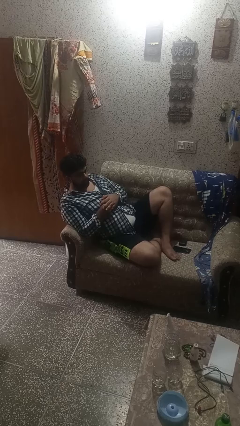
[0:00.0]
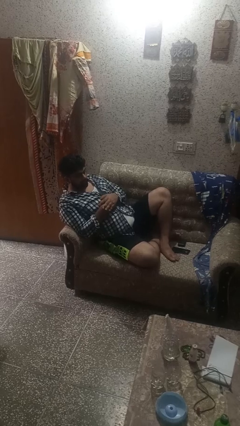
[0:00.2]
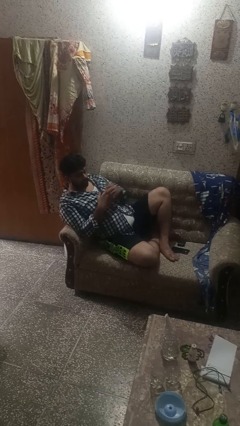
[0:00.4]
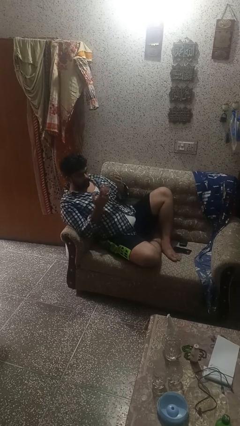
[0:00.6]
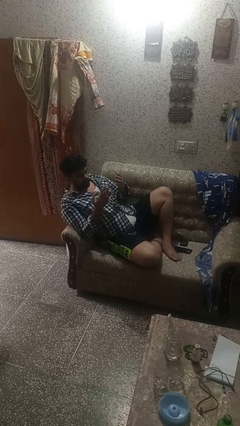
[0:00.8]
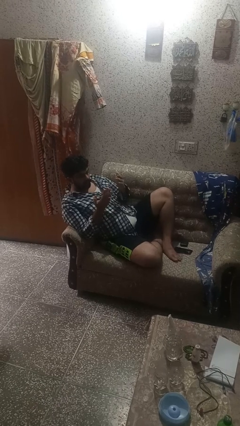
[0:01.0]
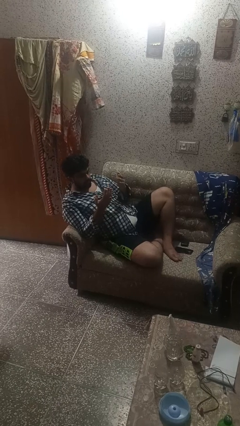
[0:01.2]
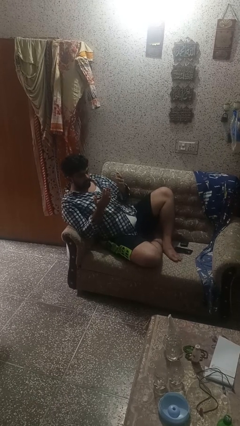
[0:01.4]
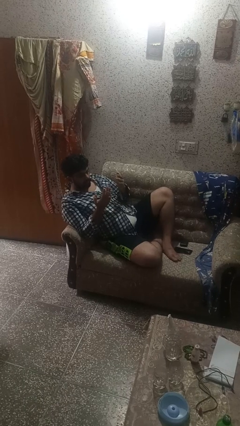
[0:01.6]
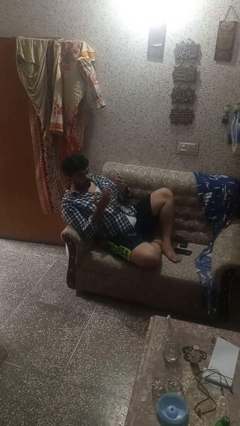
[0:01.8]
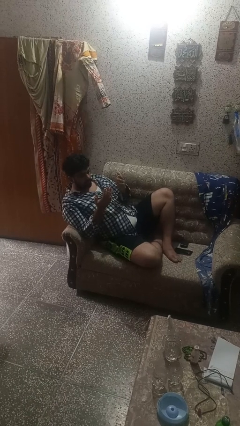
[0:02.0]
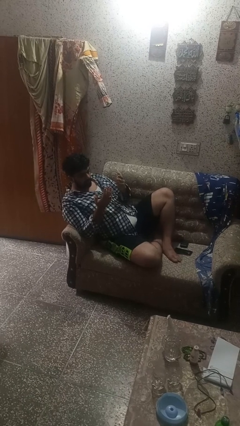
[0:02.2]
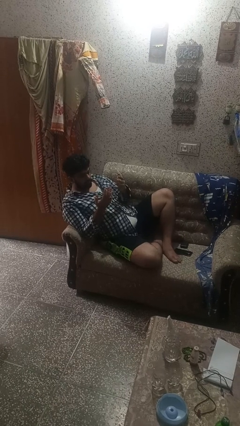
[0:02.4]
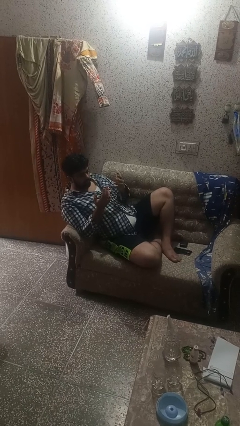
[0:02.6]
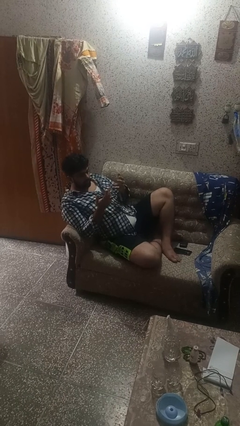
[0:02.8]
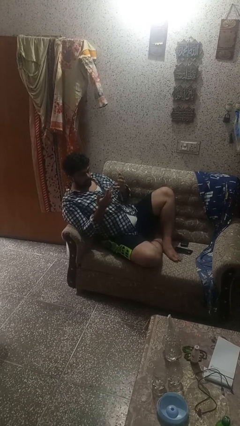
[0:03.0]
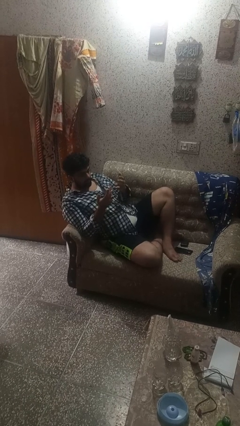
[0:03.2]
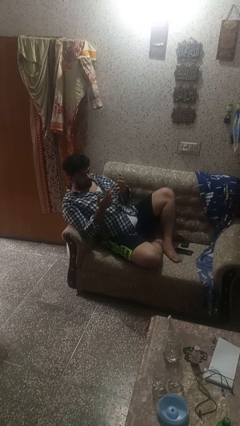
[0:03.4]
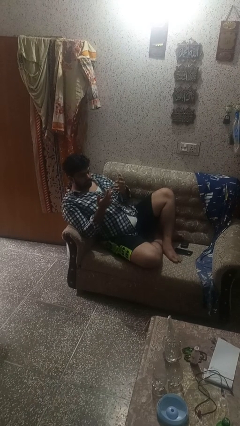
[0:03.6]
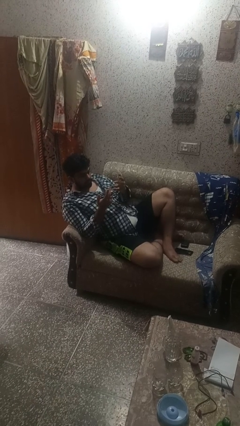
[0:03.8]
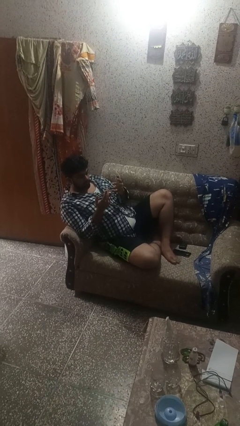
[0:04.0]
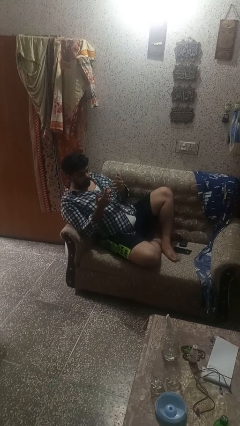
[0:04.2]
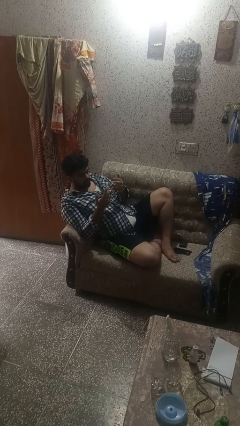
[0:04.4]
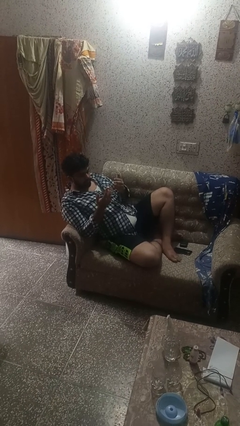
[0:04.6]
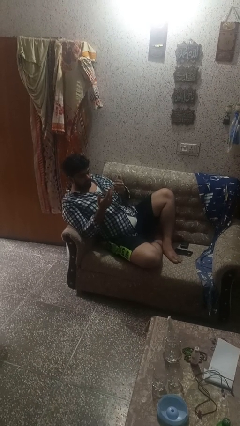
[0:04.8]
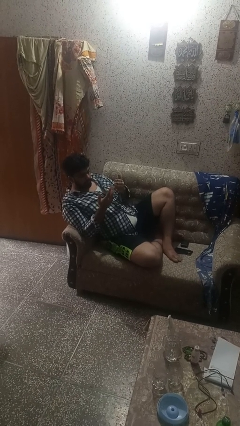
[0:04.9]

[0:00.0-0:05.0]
person prays

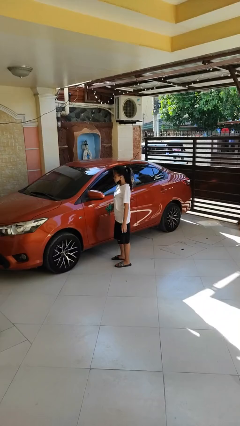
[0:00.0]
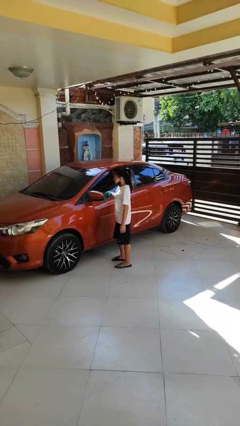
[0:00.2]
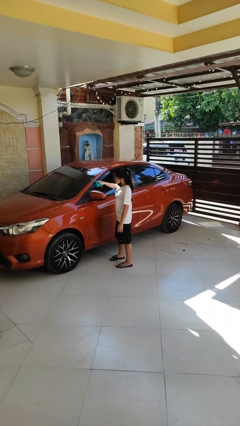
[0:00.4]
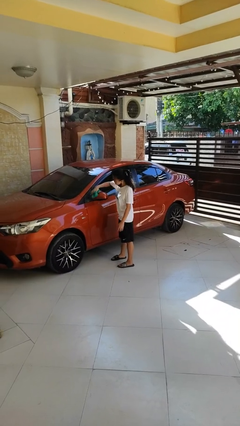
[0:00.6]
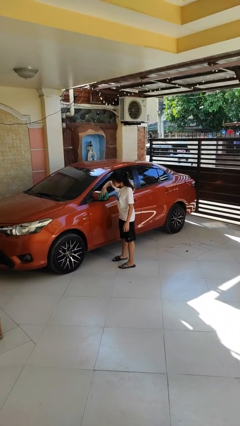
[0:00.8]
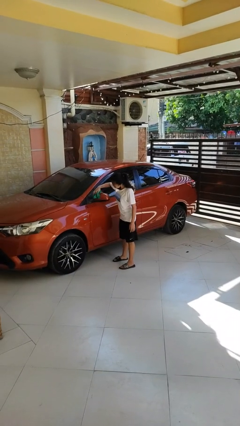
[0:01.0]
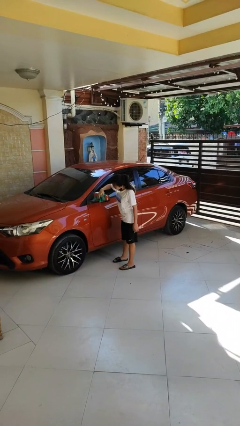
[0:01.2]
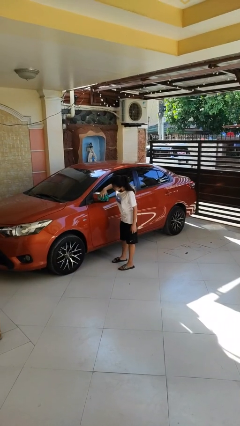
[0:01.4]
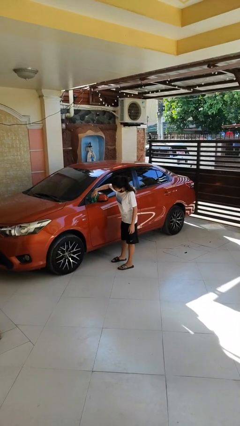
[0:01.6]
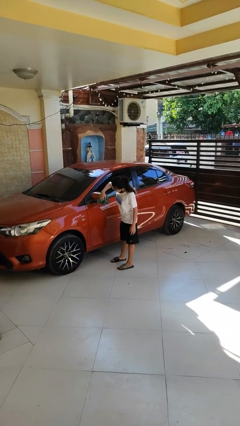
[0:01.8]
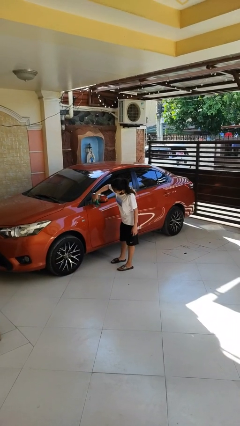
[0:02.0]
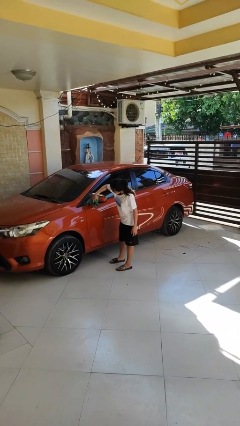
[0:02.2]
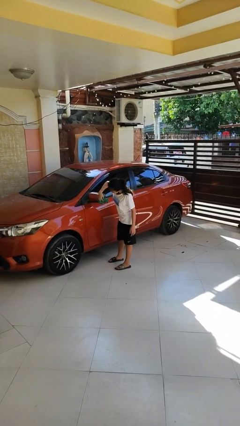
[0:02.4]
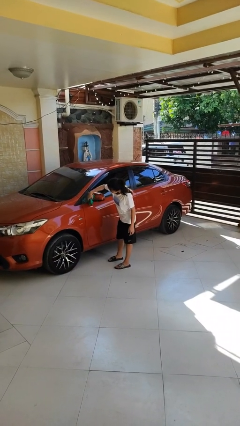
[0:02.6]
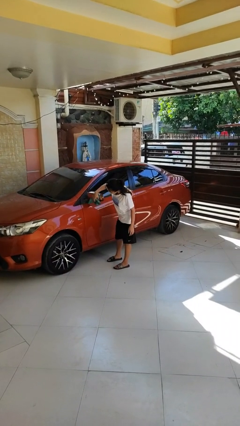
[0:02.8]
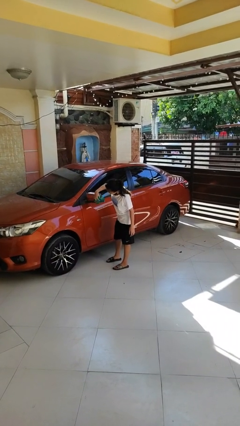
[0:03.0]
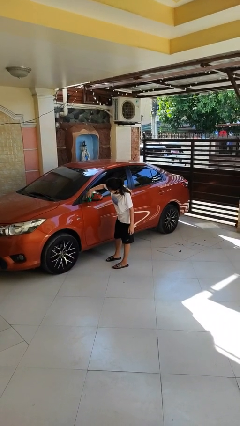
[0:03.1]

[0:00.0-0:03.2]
person polishes car with rag

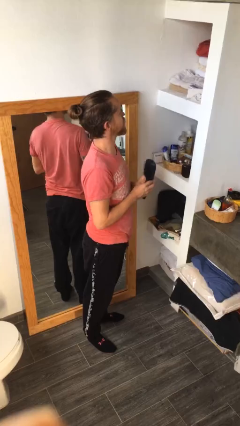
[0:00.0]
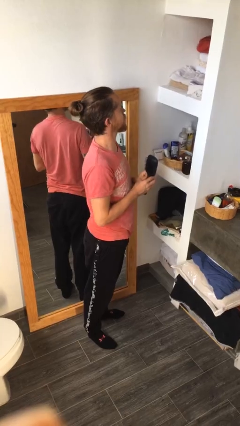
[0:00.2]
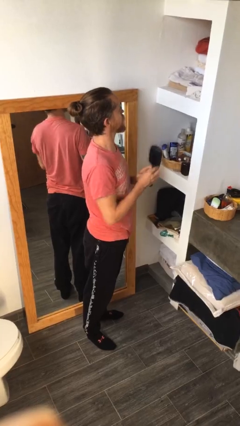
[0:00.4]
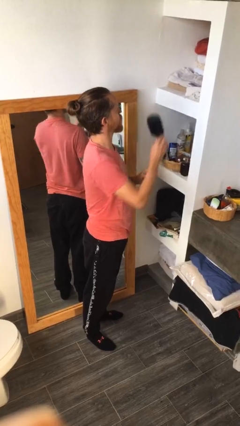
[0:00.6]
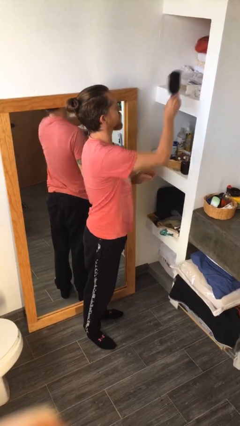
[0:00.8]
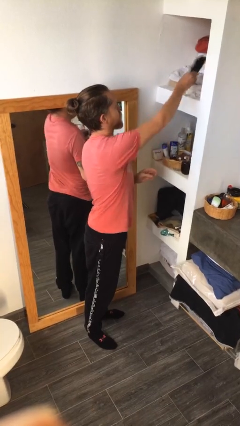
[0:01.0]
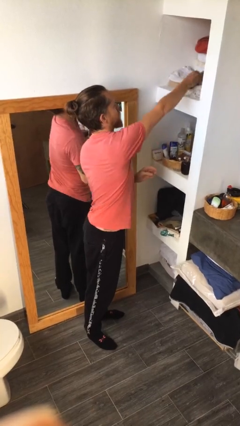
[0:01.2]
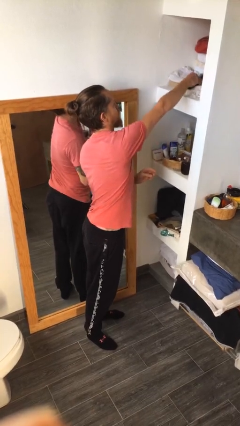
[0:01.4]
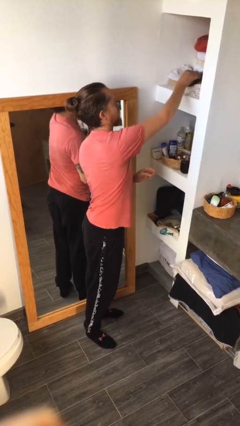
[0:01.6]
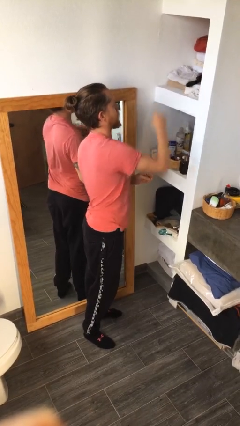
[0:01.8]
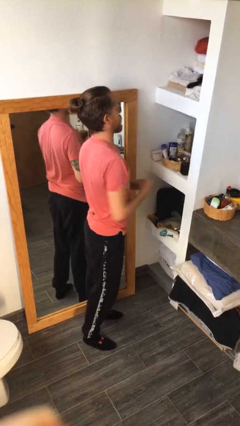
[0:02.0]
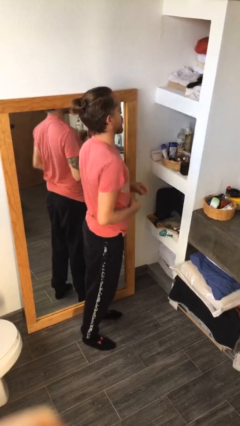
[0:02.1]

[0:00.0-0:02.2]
person puts down object on countertop

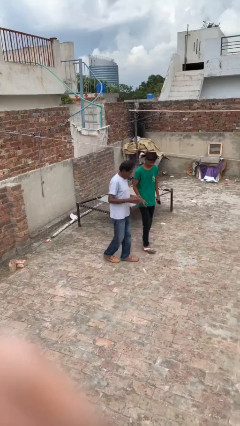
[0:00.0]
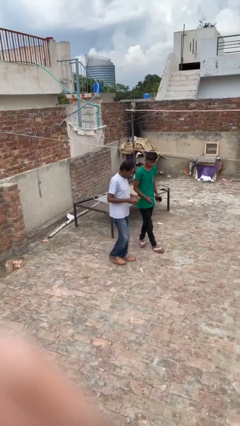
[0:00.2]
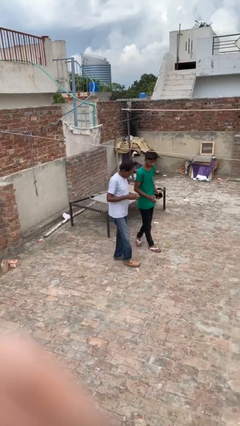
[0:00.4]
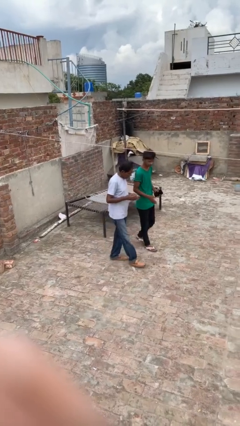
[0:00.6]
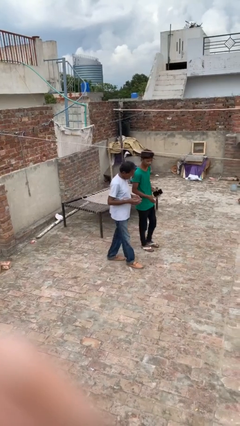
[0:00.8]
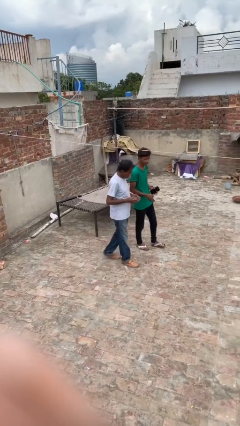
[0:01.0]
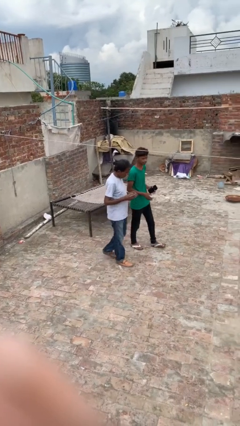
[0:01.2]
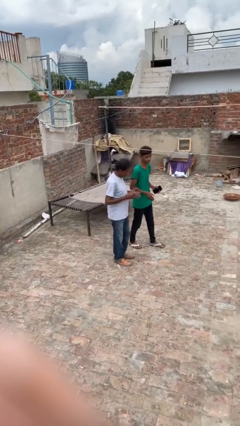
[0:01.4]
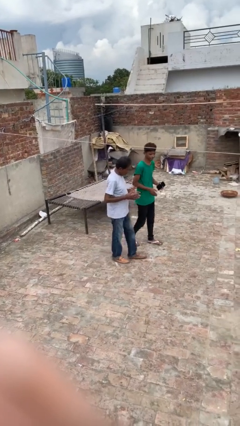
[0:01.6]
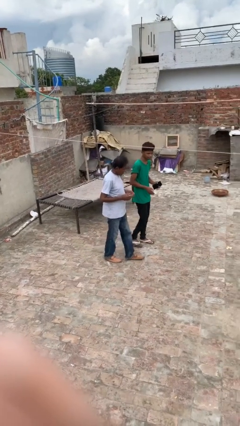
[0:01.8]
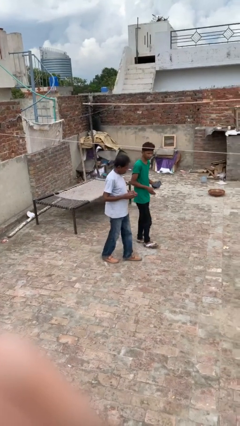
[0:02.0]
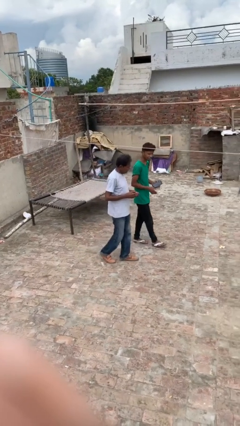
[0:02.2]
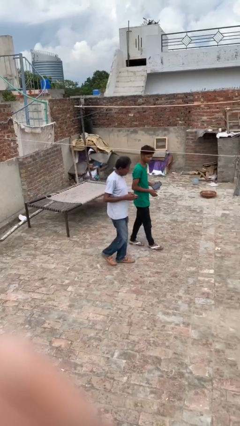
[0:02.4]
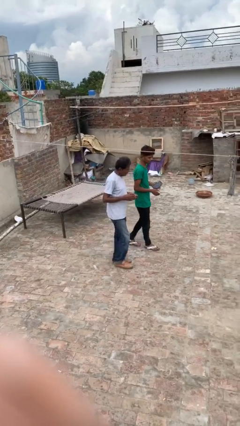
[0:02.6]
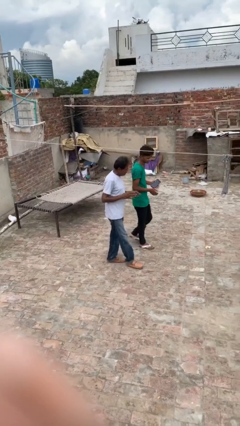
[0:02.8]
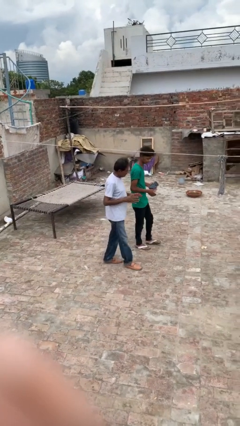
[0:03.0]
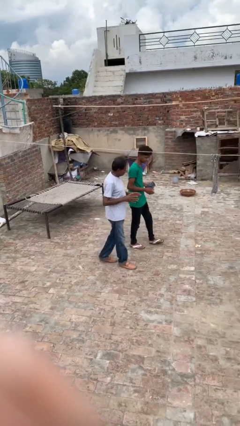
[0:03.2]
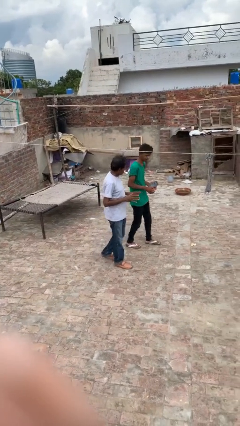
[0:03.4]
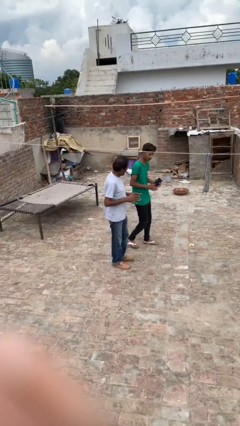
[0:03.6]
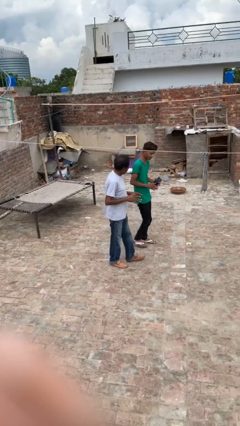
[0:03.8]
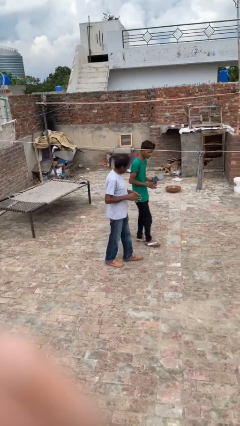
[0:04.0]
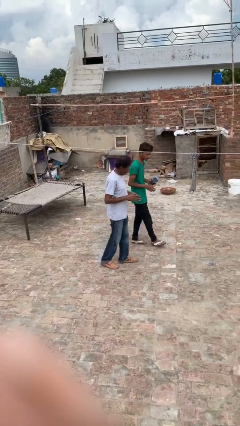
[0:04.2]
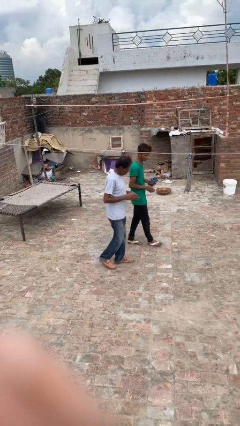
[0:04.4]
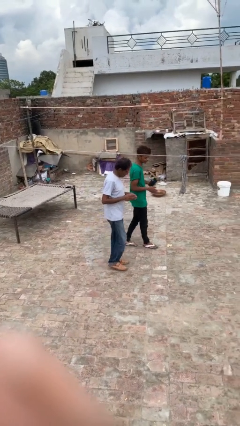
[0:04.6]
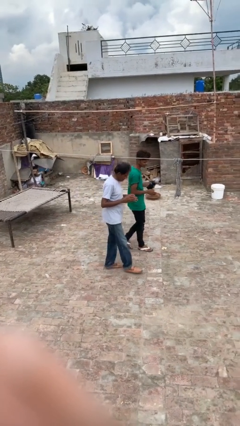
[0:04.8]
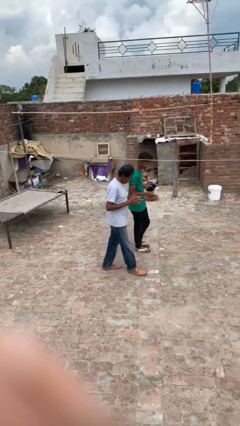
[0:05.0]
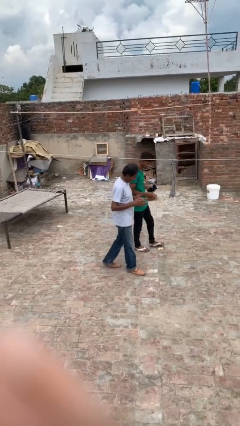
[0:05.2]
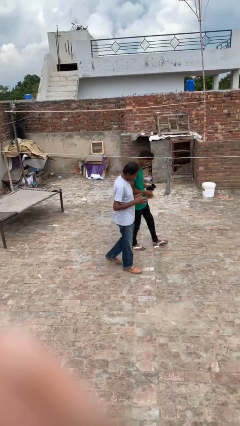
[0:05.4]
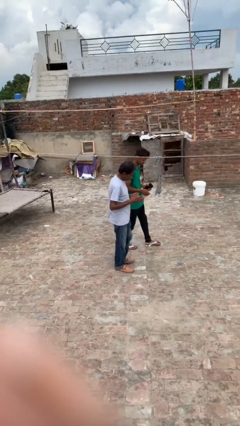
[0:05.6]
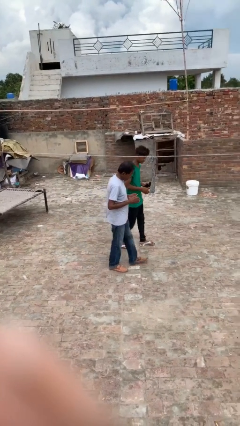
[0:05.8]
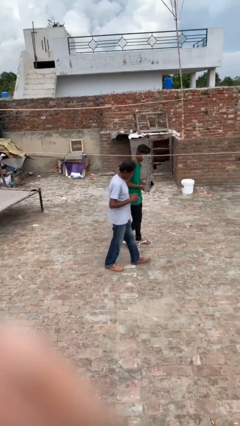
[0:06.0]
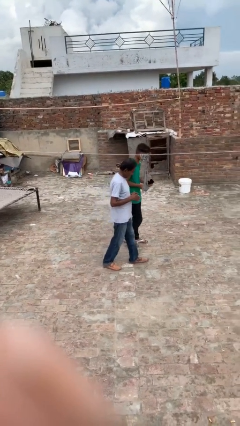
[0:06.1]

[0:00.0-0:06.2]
person talks to person

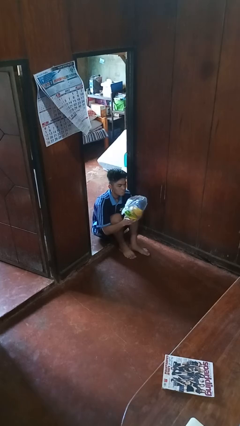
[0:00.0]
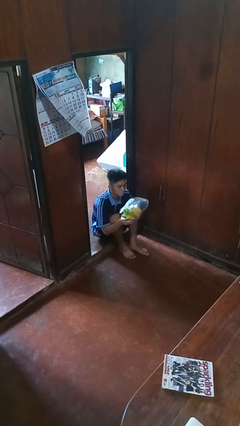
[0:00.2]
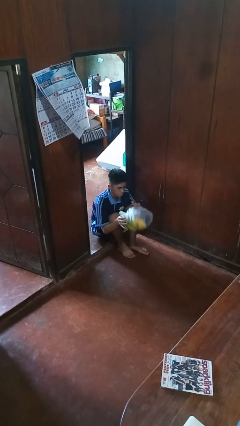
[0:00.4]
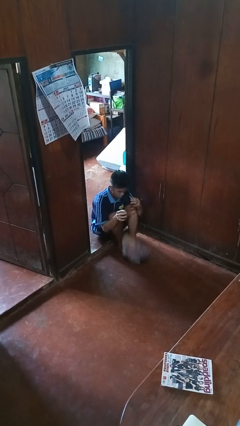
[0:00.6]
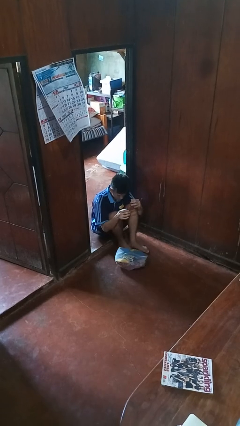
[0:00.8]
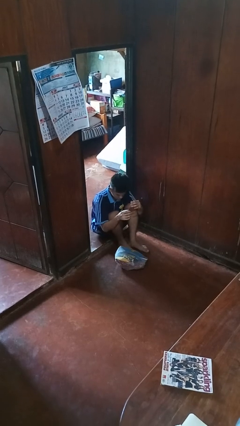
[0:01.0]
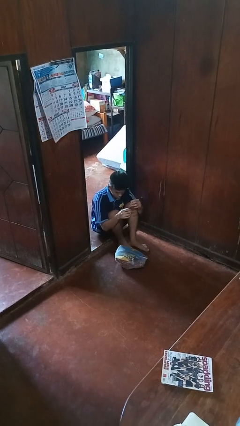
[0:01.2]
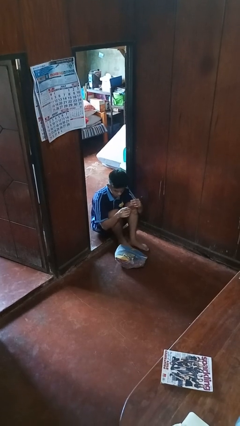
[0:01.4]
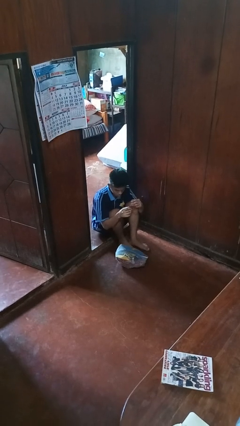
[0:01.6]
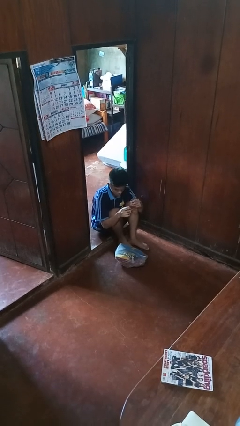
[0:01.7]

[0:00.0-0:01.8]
person drops object
